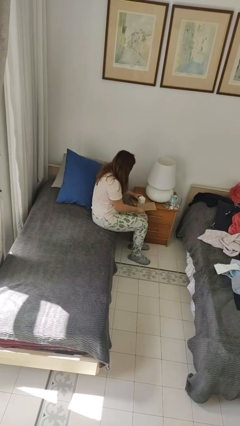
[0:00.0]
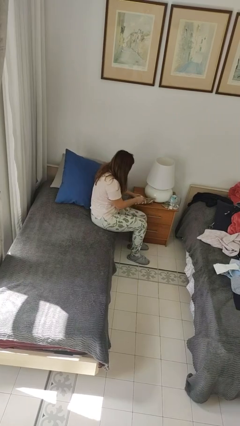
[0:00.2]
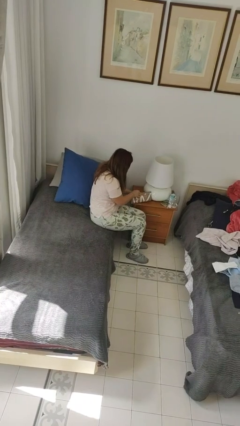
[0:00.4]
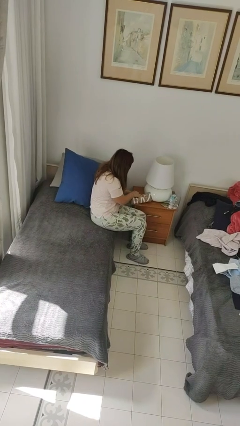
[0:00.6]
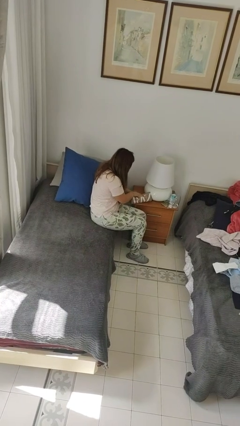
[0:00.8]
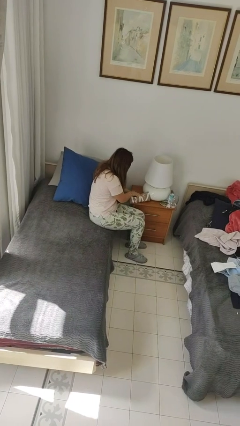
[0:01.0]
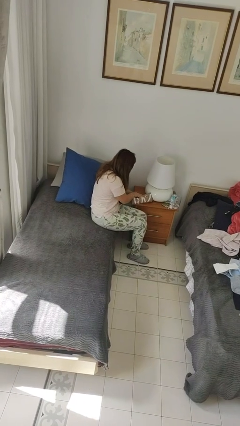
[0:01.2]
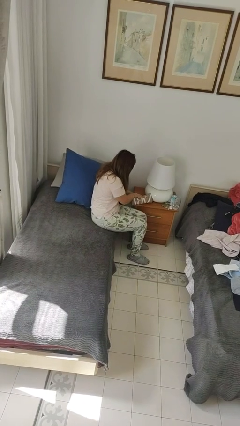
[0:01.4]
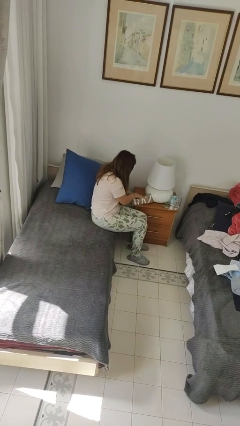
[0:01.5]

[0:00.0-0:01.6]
person wraps box

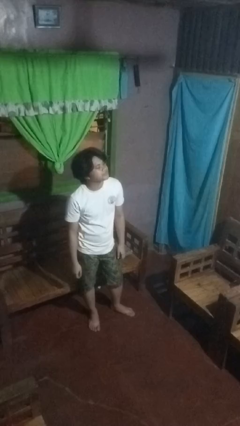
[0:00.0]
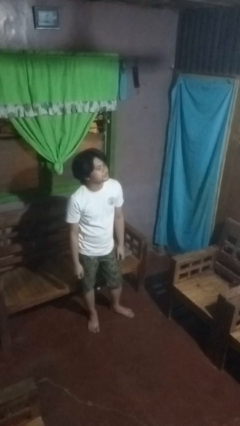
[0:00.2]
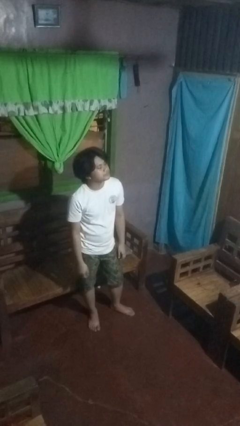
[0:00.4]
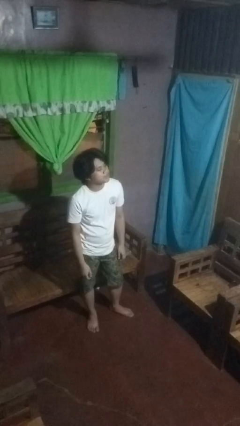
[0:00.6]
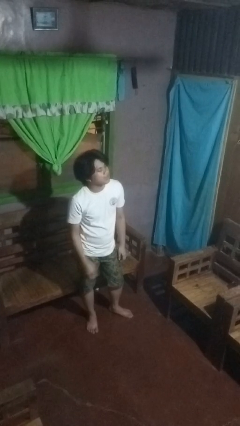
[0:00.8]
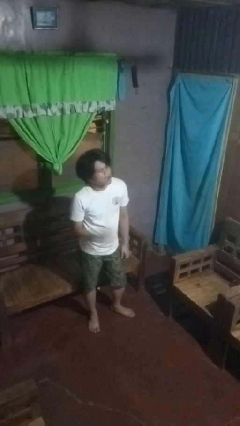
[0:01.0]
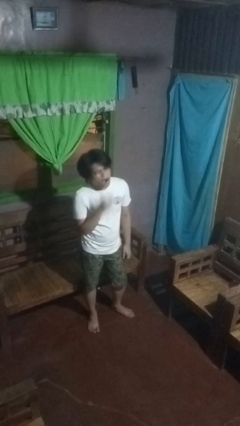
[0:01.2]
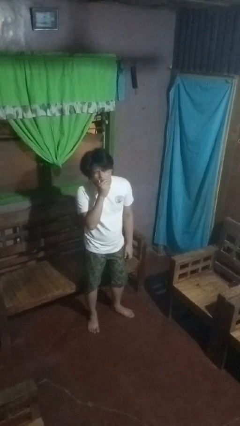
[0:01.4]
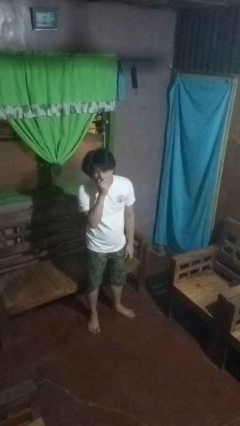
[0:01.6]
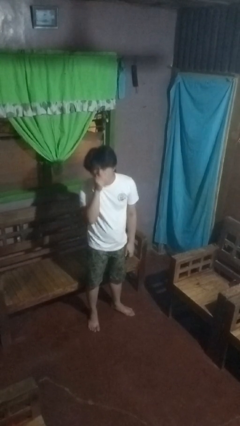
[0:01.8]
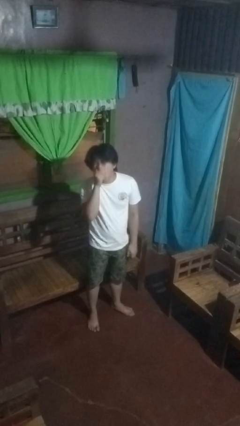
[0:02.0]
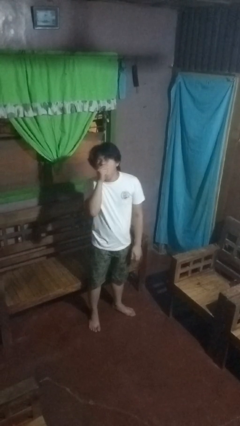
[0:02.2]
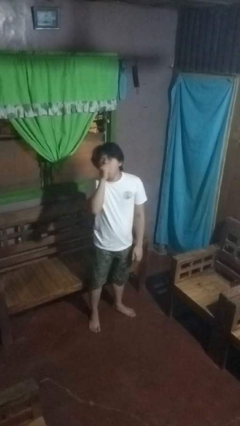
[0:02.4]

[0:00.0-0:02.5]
person yawns

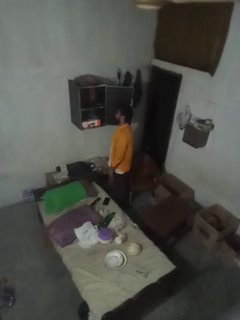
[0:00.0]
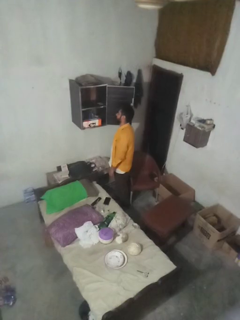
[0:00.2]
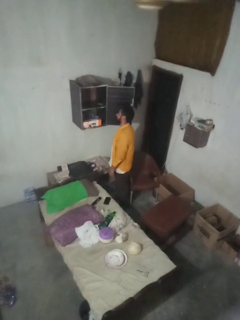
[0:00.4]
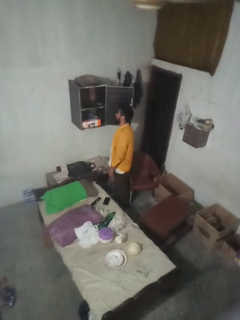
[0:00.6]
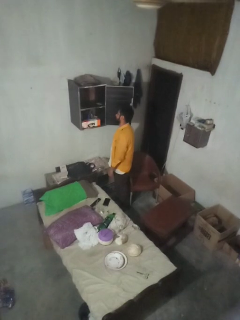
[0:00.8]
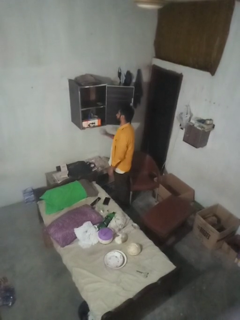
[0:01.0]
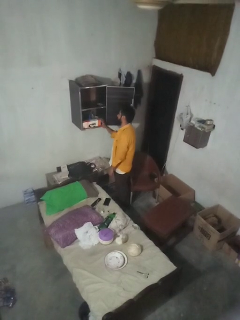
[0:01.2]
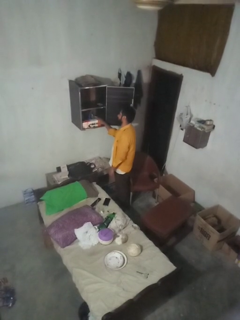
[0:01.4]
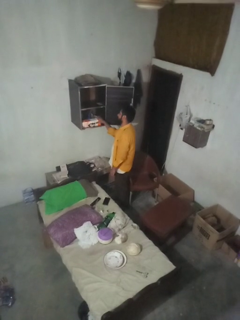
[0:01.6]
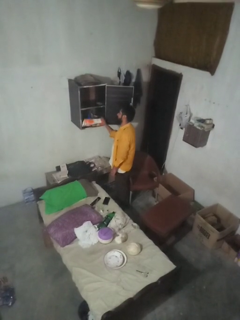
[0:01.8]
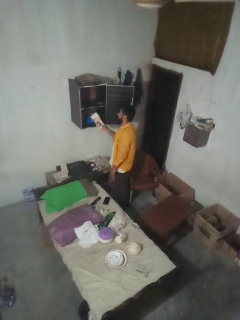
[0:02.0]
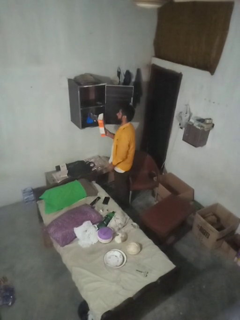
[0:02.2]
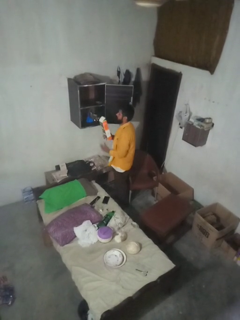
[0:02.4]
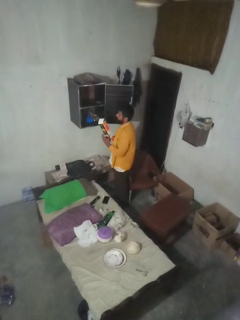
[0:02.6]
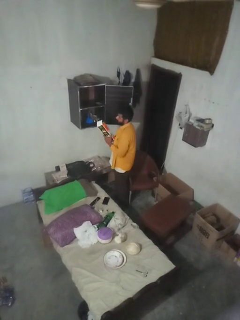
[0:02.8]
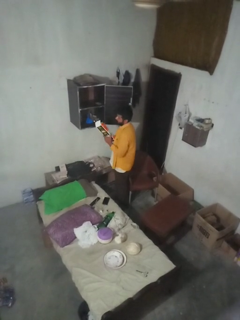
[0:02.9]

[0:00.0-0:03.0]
person picks up object from cabinet

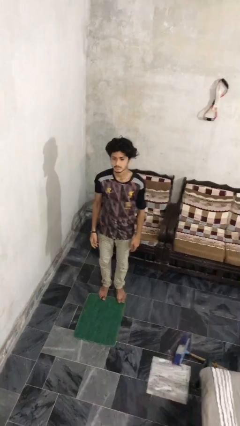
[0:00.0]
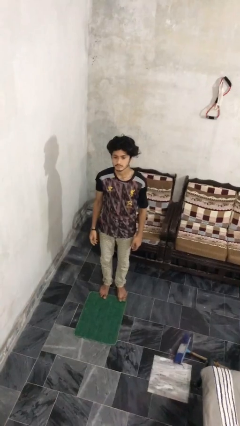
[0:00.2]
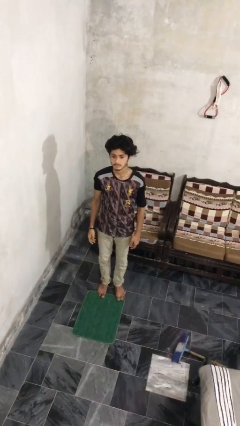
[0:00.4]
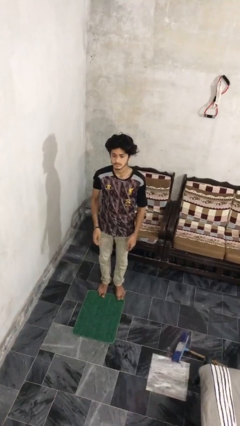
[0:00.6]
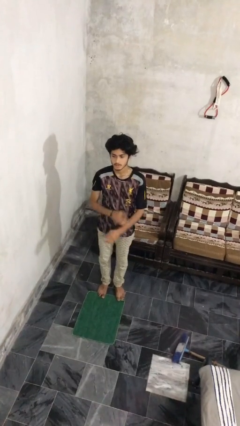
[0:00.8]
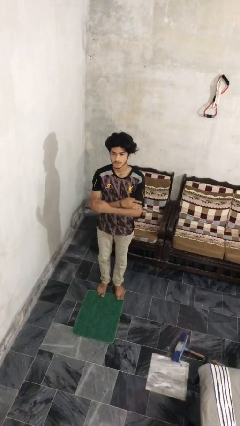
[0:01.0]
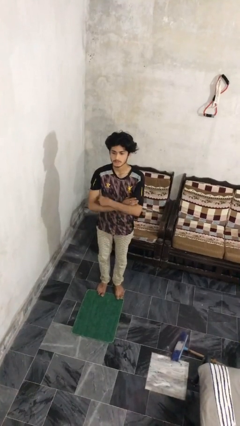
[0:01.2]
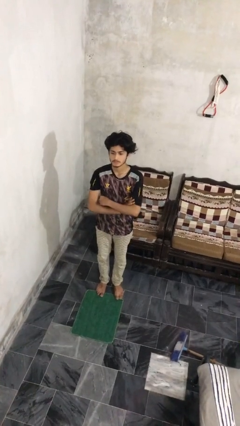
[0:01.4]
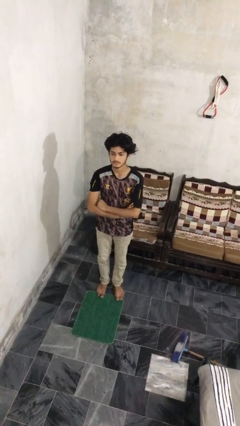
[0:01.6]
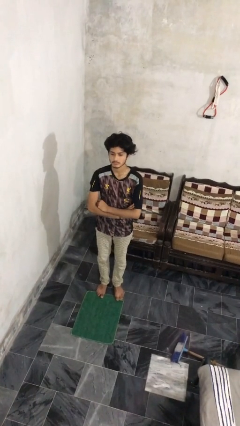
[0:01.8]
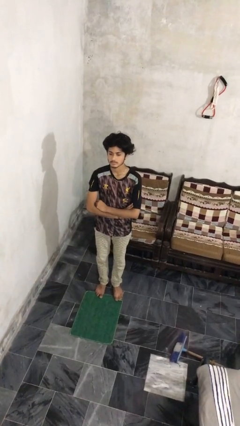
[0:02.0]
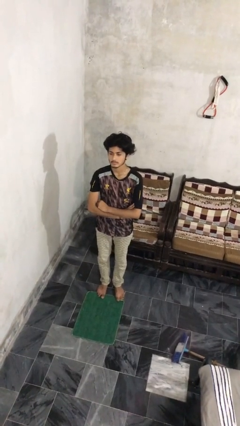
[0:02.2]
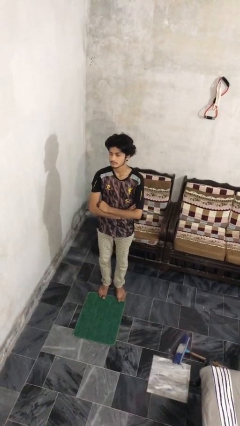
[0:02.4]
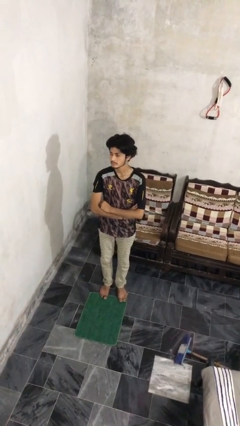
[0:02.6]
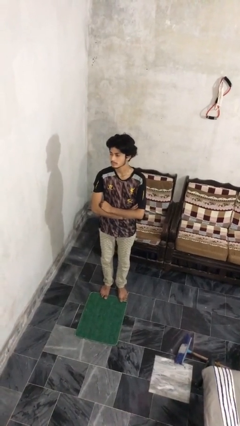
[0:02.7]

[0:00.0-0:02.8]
person crosses arms

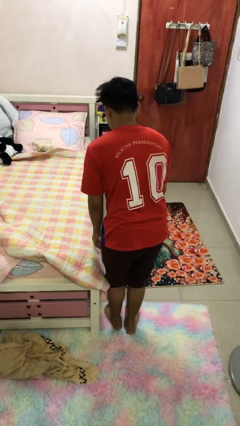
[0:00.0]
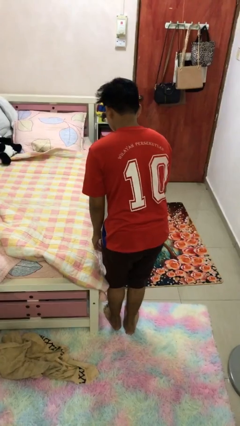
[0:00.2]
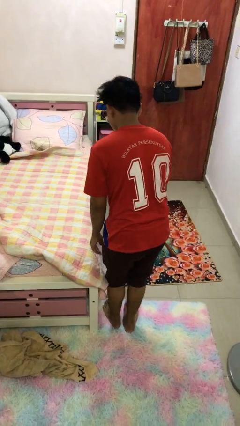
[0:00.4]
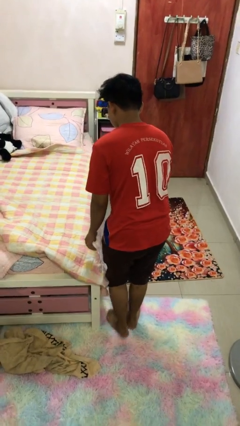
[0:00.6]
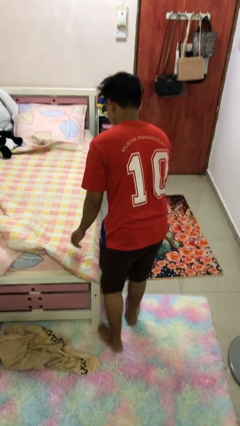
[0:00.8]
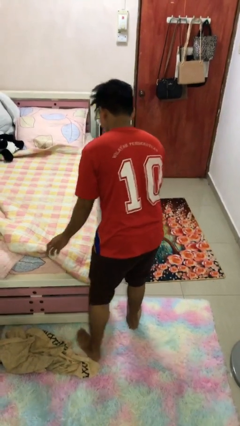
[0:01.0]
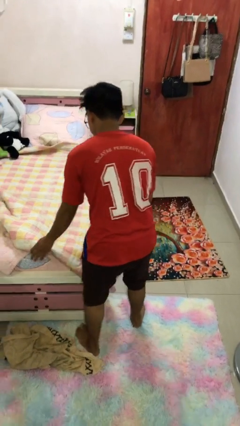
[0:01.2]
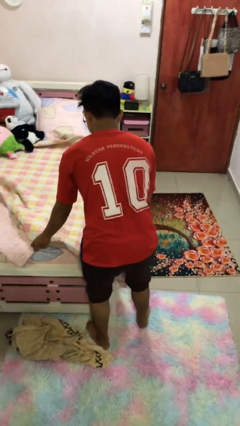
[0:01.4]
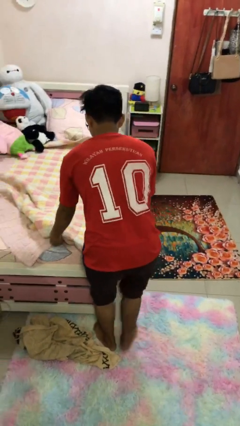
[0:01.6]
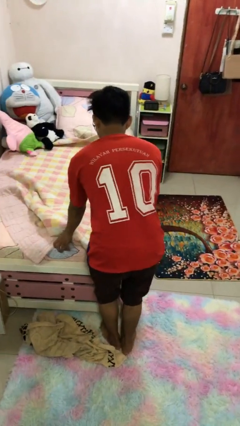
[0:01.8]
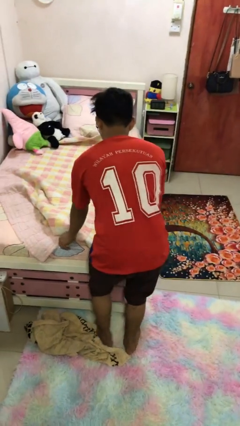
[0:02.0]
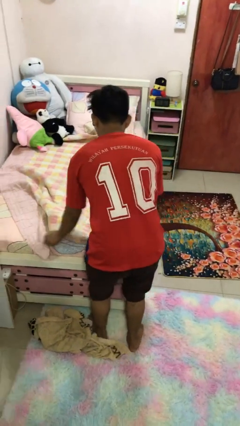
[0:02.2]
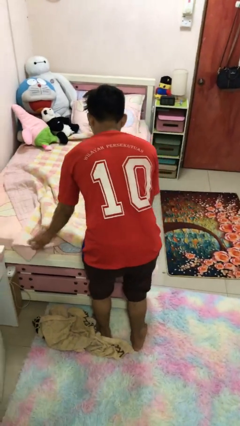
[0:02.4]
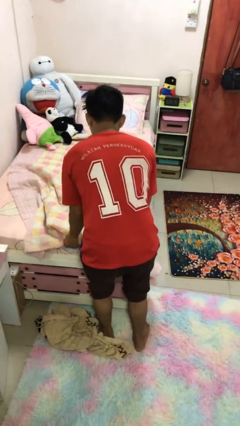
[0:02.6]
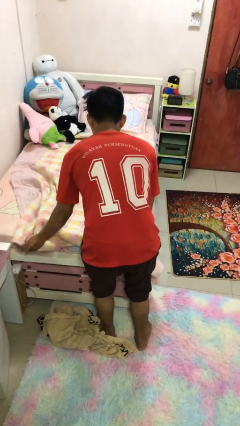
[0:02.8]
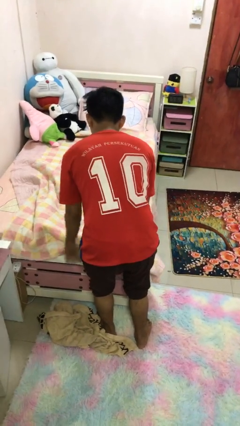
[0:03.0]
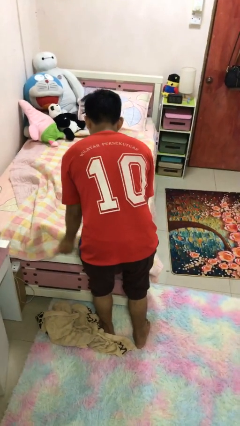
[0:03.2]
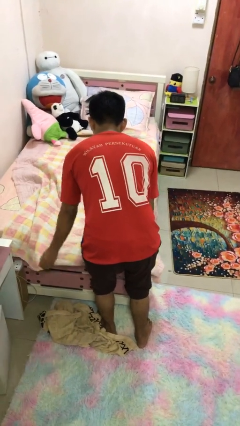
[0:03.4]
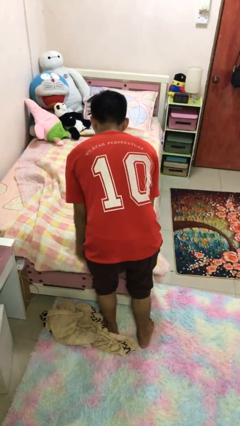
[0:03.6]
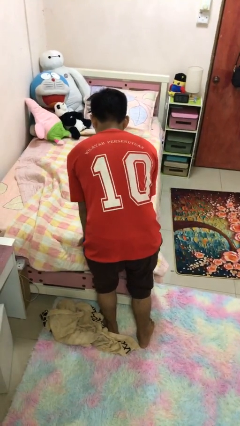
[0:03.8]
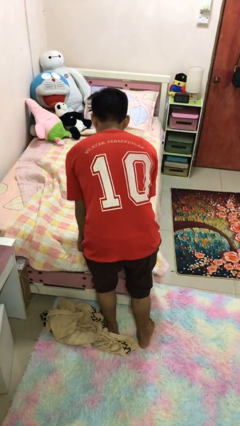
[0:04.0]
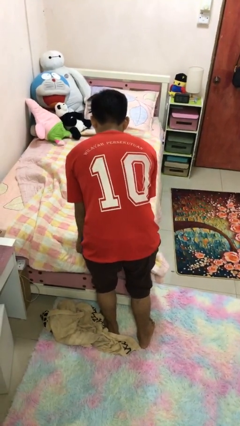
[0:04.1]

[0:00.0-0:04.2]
person makes bed

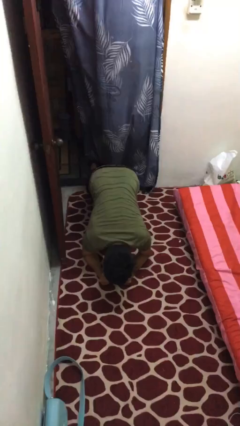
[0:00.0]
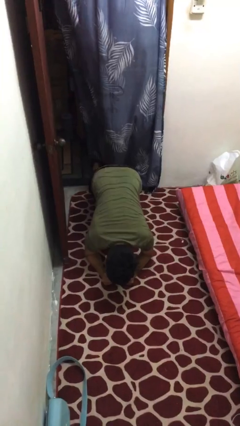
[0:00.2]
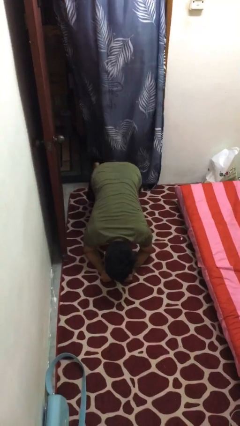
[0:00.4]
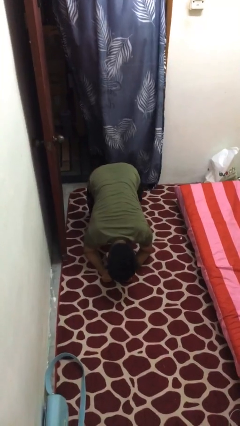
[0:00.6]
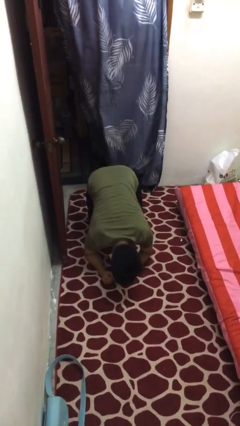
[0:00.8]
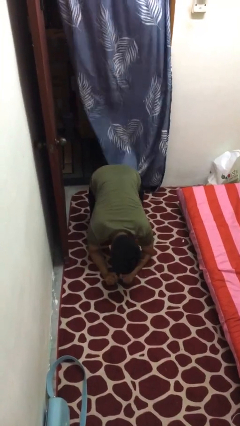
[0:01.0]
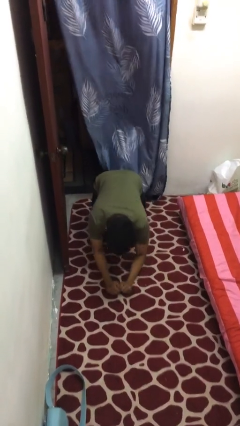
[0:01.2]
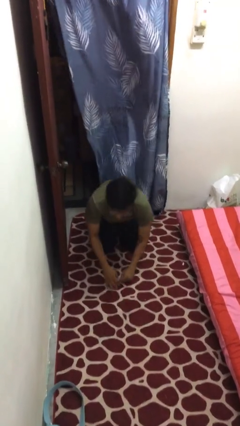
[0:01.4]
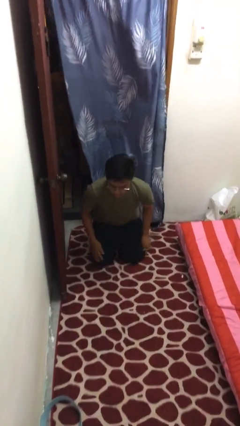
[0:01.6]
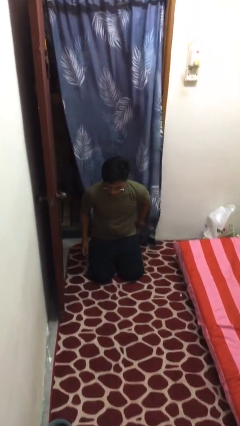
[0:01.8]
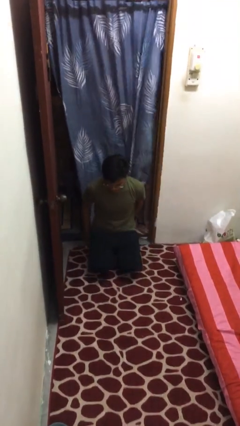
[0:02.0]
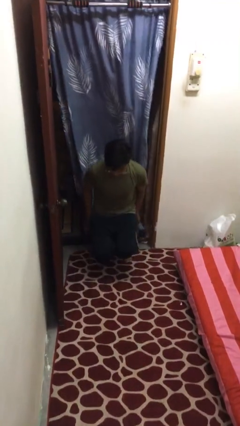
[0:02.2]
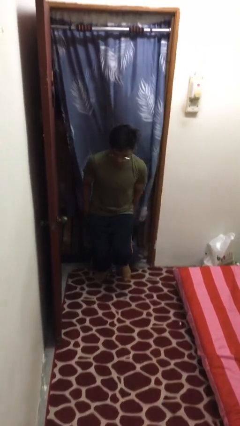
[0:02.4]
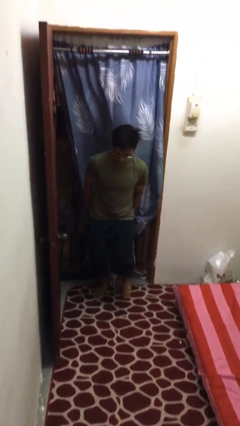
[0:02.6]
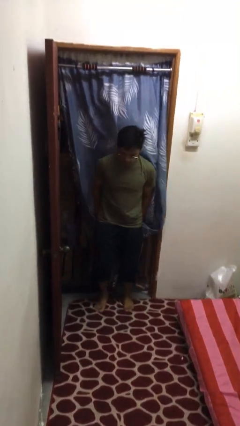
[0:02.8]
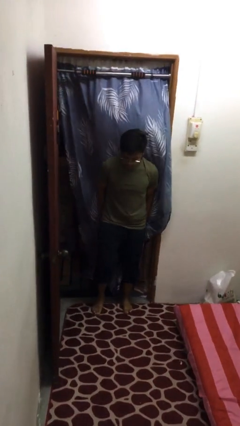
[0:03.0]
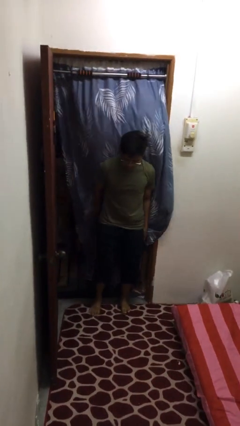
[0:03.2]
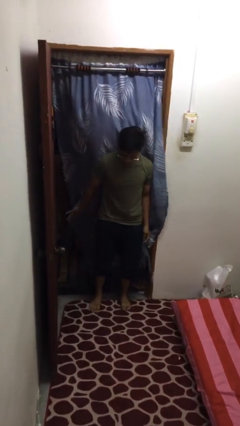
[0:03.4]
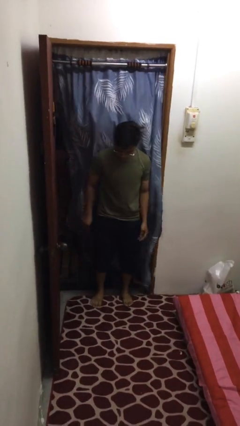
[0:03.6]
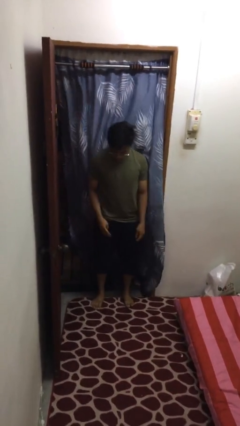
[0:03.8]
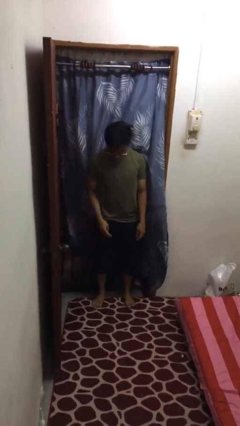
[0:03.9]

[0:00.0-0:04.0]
person stands up from floor

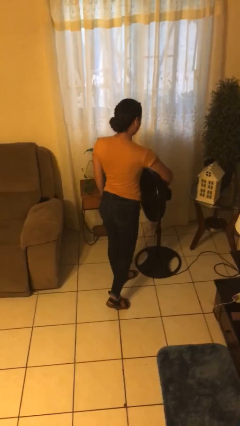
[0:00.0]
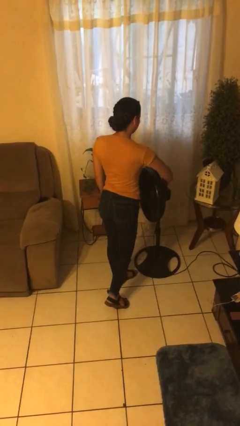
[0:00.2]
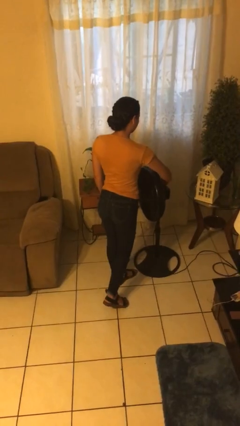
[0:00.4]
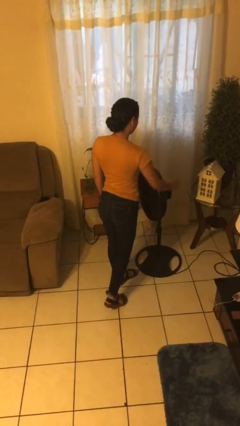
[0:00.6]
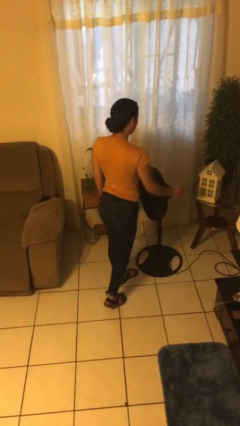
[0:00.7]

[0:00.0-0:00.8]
person turns on fan
